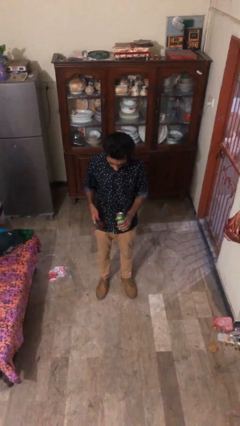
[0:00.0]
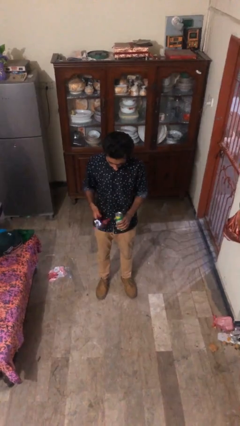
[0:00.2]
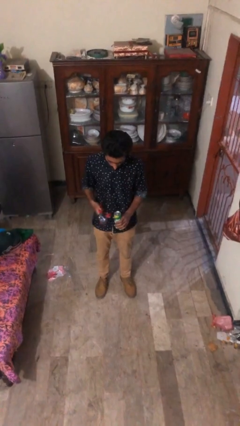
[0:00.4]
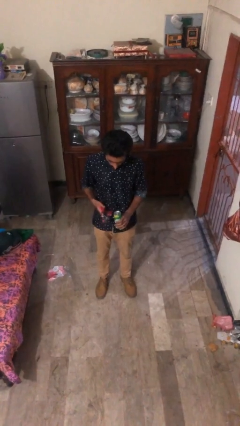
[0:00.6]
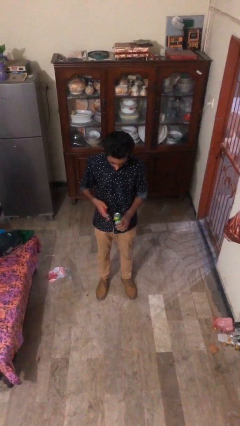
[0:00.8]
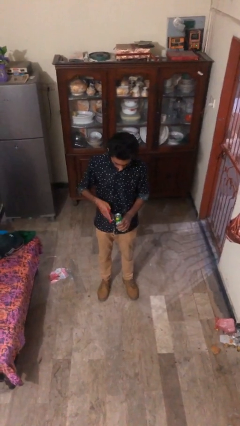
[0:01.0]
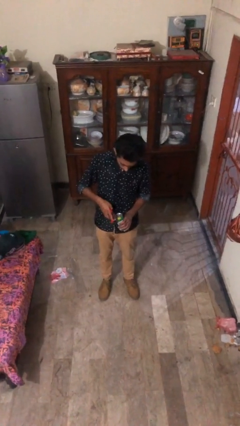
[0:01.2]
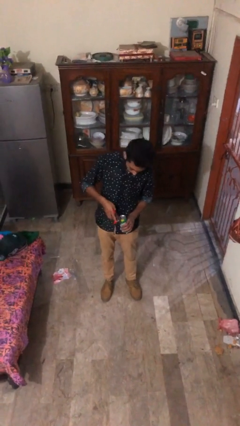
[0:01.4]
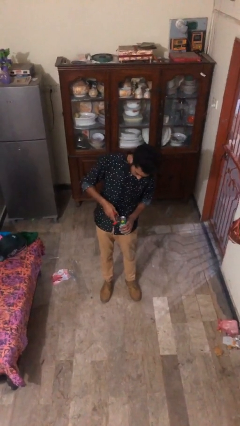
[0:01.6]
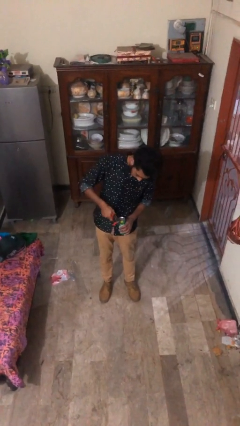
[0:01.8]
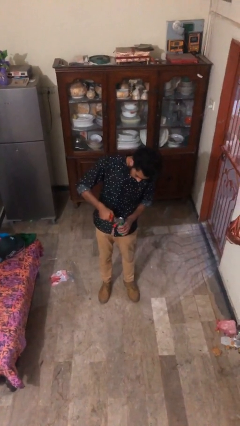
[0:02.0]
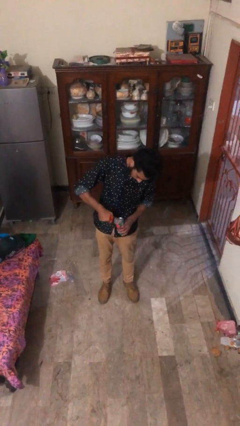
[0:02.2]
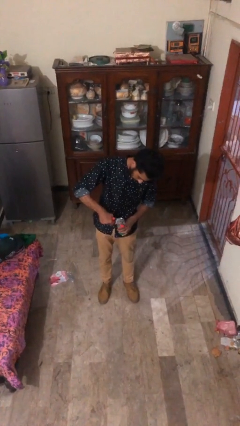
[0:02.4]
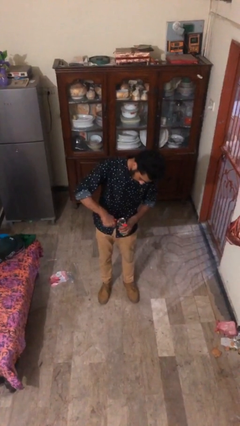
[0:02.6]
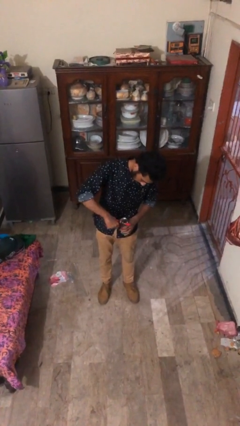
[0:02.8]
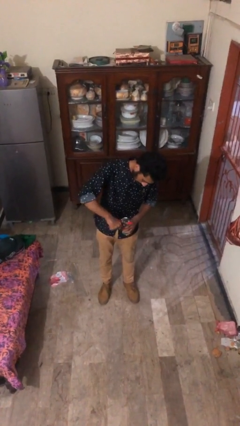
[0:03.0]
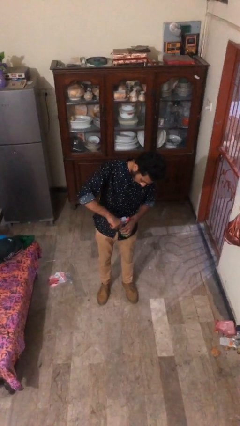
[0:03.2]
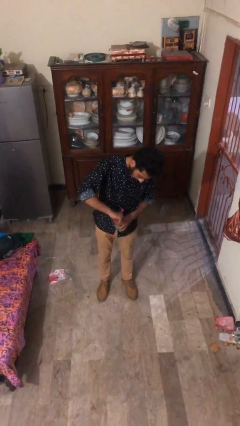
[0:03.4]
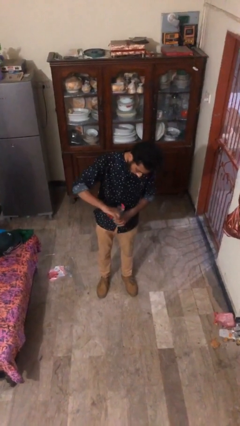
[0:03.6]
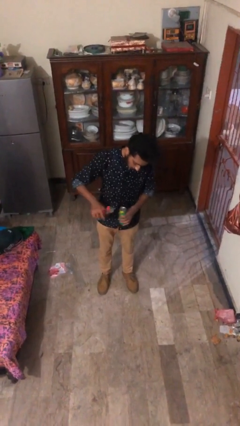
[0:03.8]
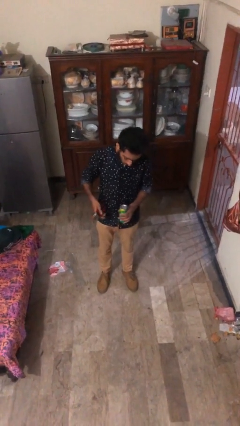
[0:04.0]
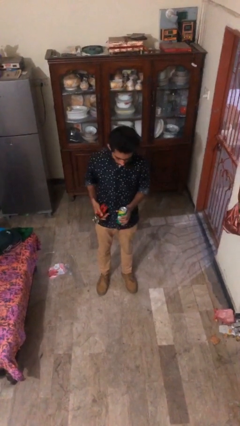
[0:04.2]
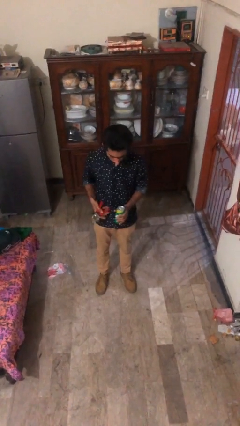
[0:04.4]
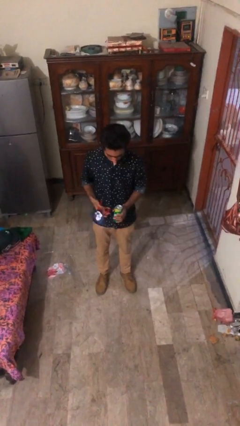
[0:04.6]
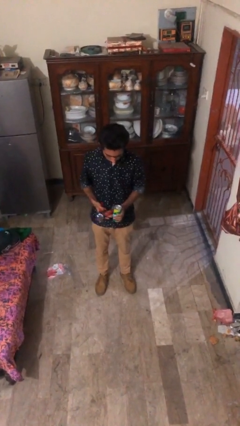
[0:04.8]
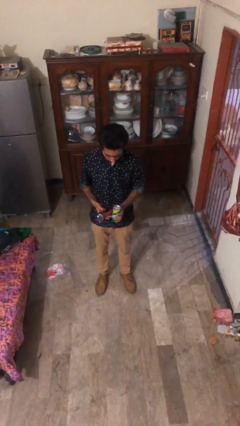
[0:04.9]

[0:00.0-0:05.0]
person opens can with can opener

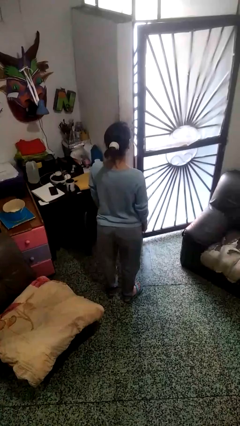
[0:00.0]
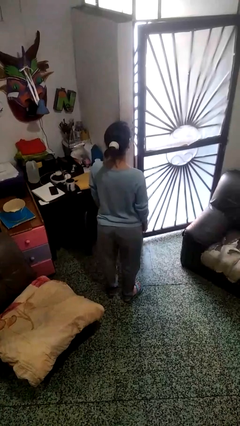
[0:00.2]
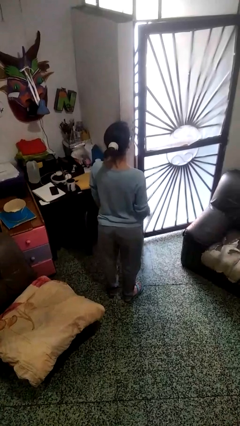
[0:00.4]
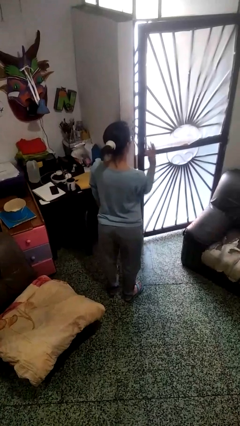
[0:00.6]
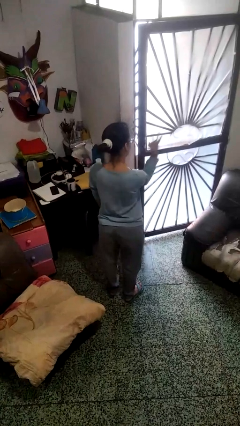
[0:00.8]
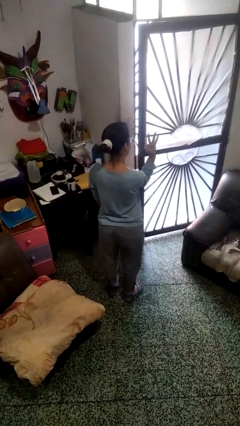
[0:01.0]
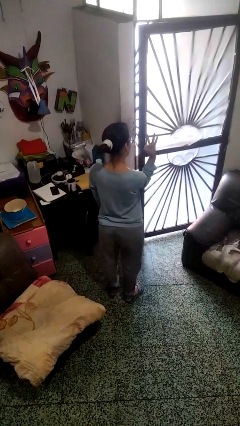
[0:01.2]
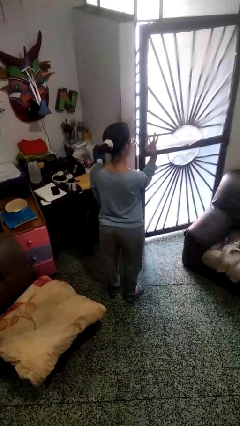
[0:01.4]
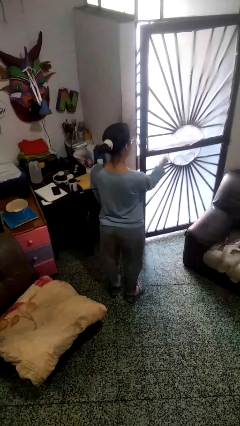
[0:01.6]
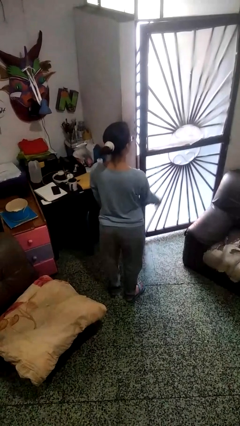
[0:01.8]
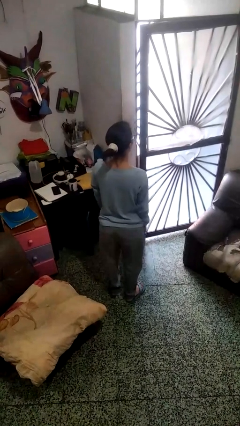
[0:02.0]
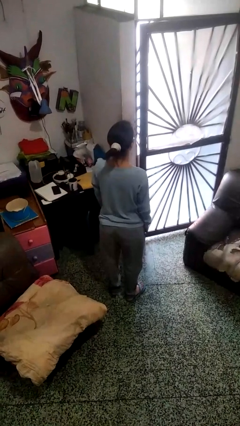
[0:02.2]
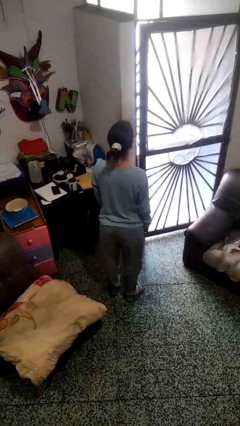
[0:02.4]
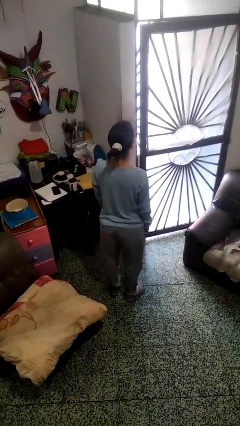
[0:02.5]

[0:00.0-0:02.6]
person gestures number three

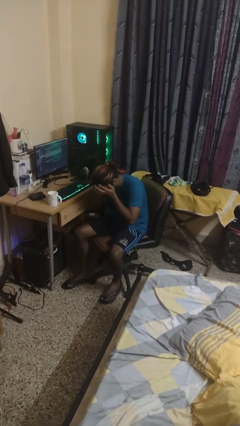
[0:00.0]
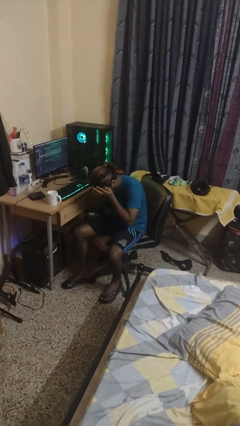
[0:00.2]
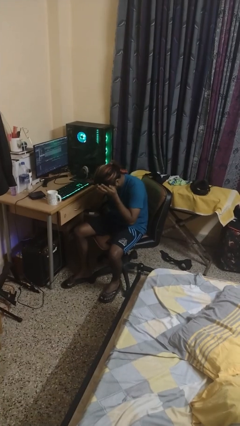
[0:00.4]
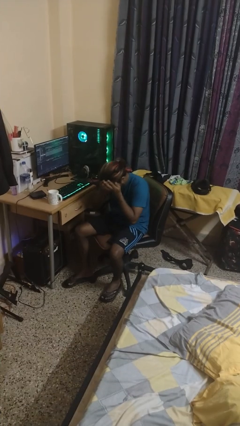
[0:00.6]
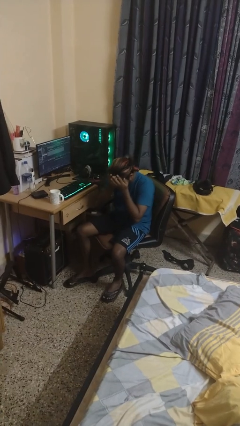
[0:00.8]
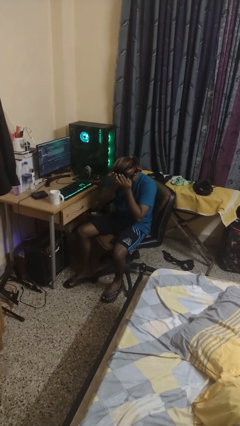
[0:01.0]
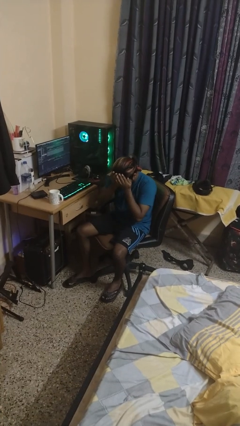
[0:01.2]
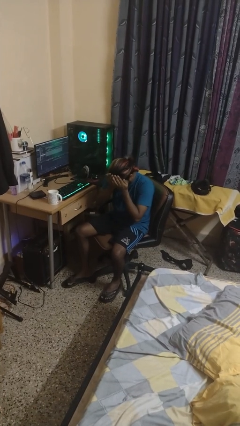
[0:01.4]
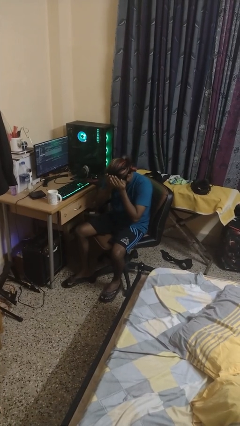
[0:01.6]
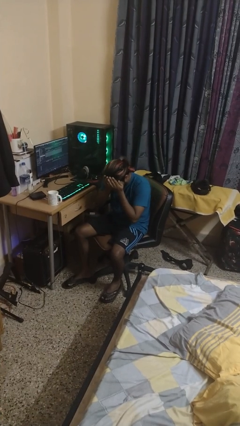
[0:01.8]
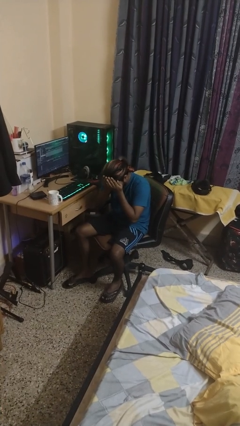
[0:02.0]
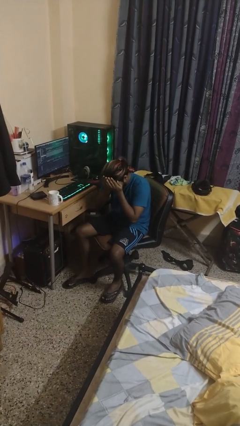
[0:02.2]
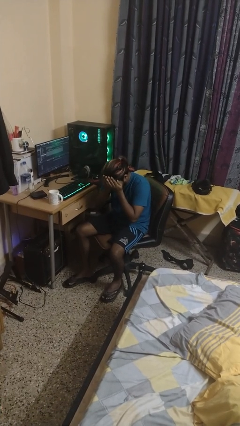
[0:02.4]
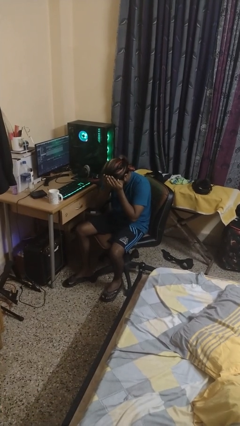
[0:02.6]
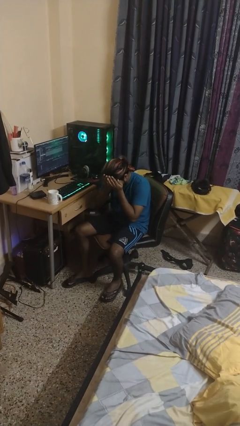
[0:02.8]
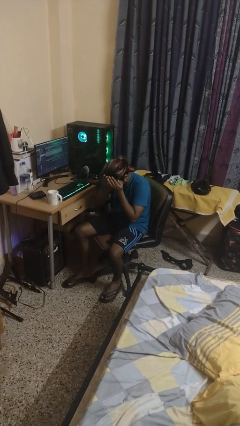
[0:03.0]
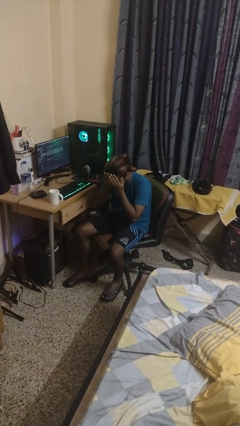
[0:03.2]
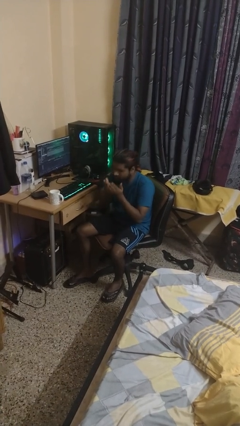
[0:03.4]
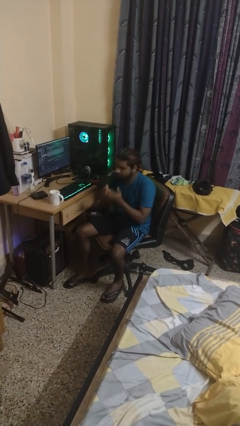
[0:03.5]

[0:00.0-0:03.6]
person covers face with hands

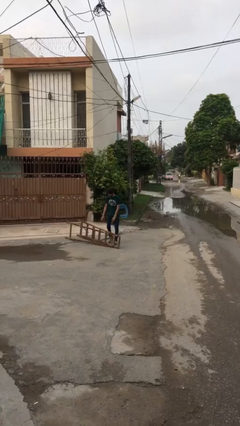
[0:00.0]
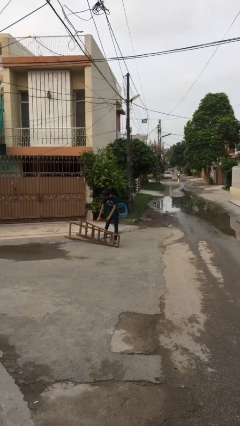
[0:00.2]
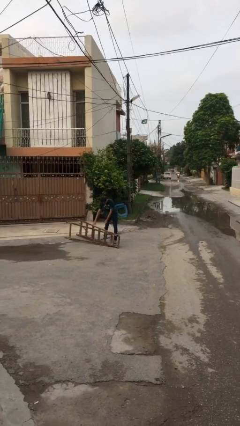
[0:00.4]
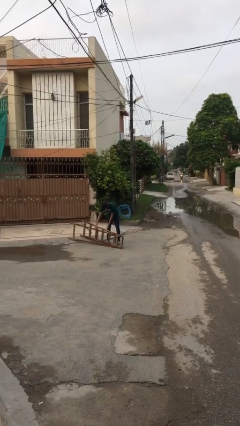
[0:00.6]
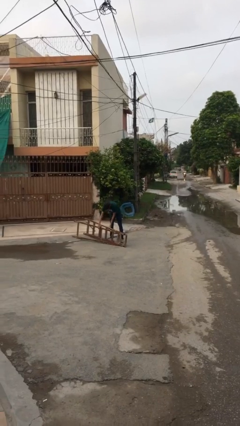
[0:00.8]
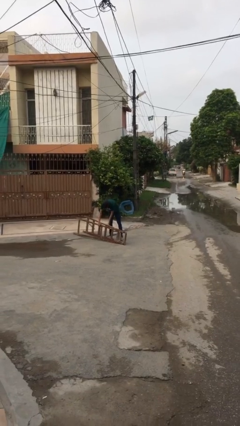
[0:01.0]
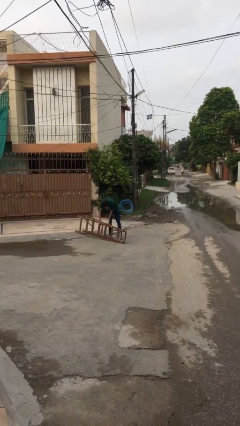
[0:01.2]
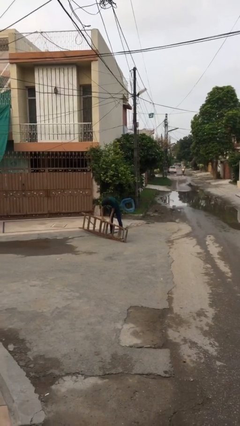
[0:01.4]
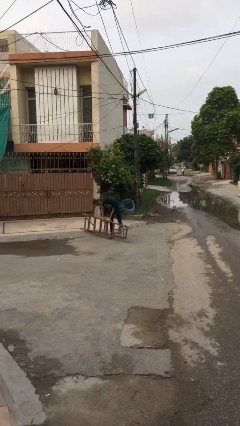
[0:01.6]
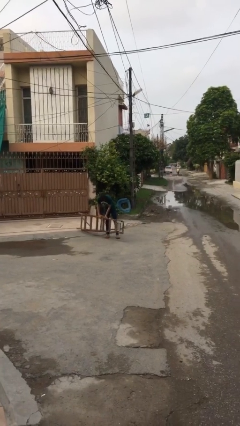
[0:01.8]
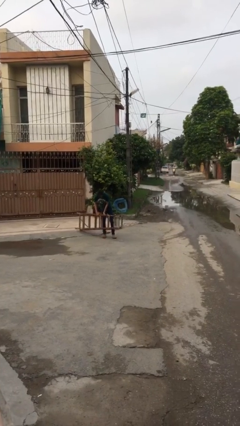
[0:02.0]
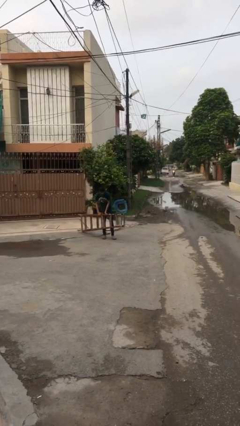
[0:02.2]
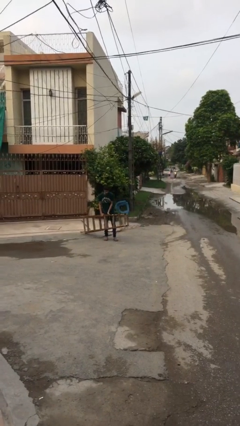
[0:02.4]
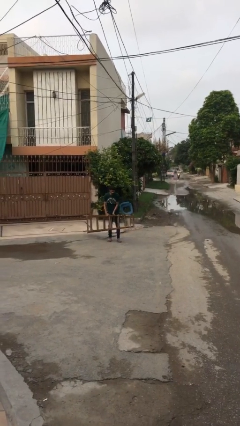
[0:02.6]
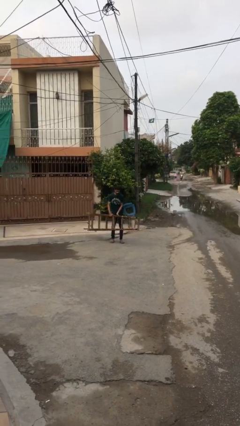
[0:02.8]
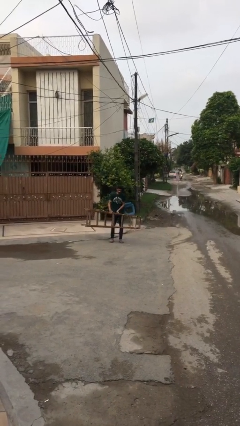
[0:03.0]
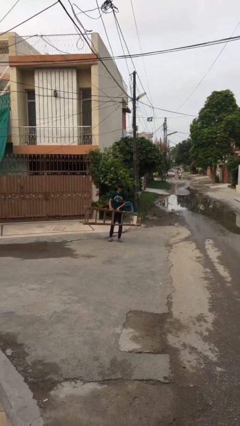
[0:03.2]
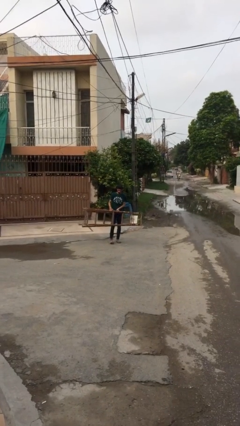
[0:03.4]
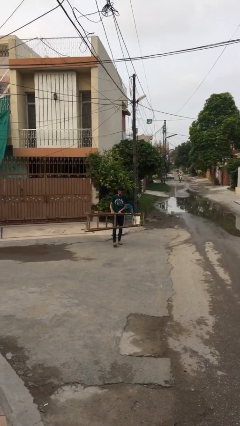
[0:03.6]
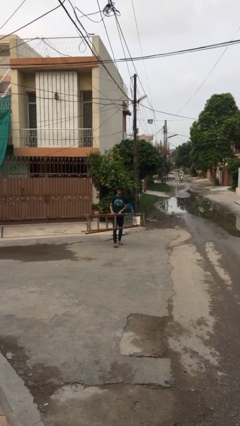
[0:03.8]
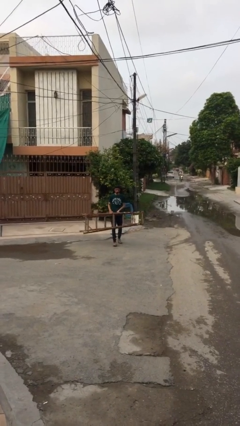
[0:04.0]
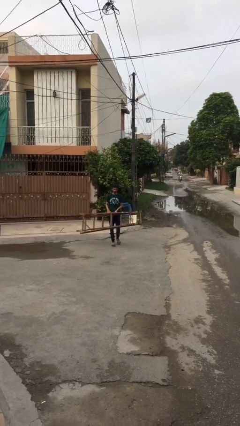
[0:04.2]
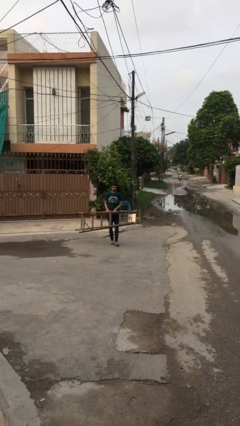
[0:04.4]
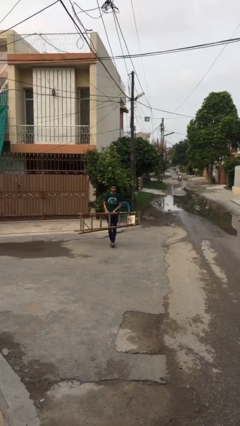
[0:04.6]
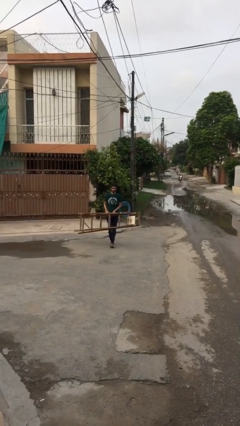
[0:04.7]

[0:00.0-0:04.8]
person carries heavy object

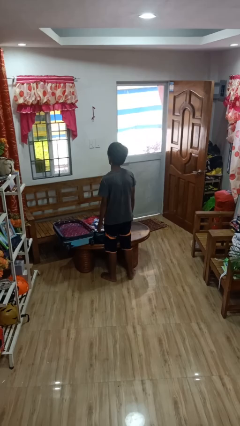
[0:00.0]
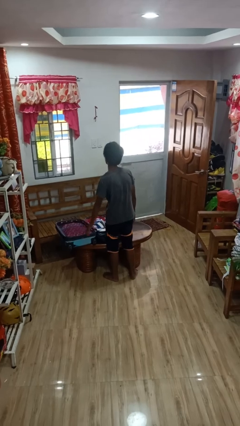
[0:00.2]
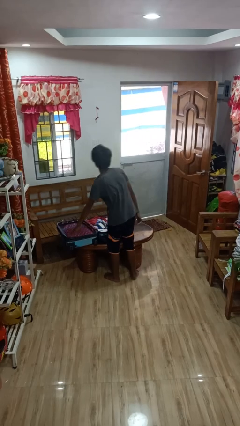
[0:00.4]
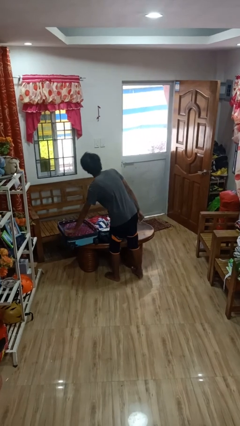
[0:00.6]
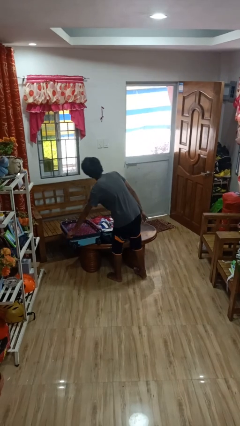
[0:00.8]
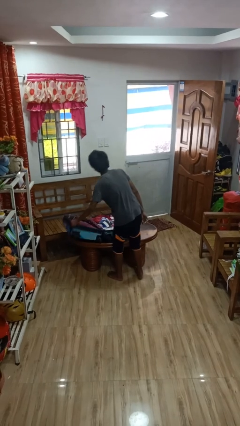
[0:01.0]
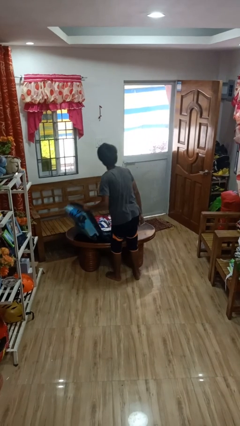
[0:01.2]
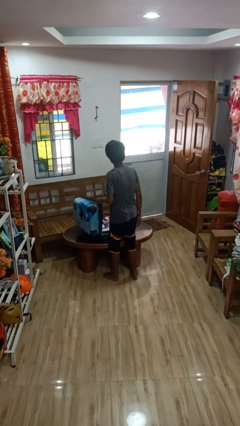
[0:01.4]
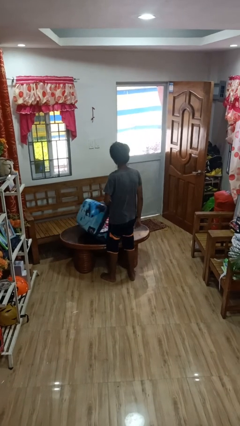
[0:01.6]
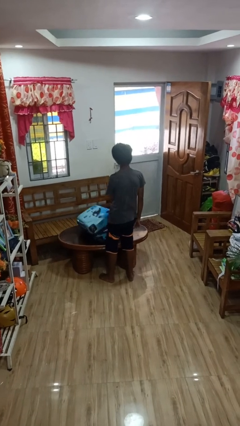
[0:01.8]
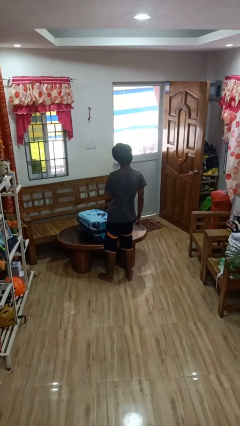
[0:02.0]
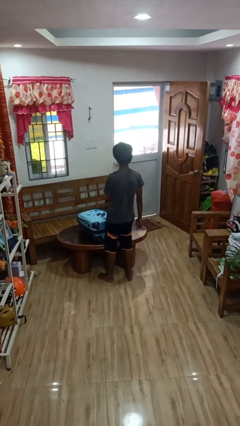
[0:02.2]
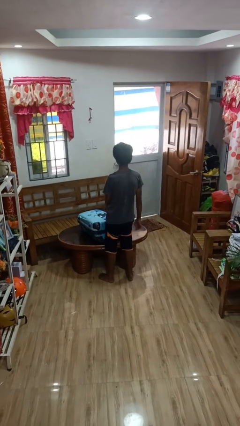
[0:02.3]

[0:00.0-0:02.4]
person closes suitcase
